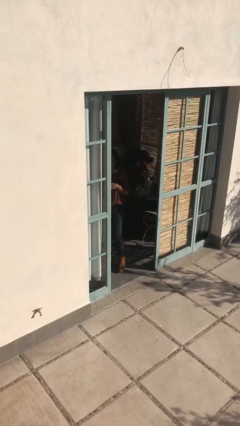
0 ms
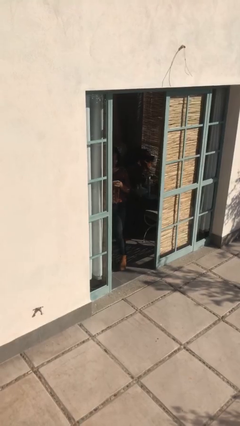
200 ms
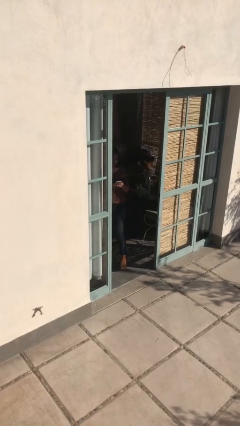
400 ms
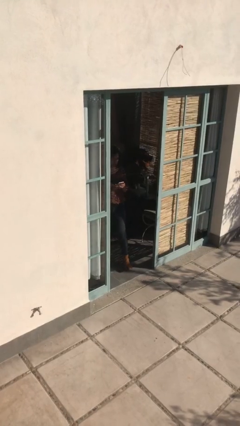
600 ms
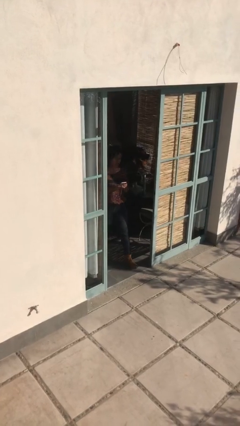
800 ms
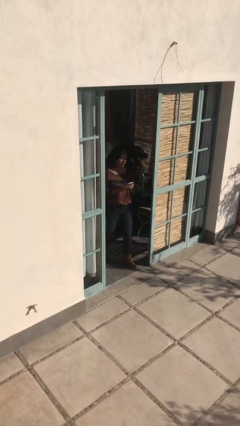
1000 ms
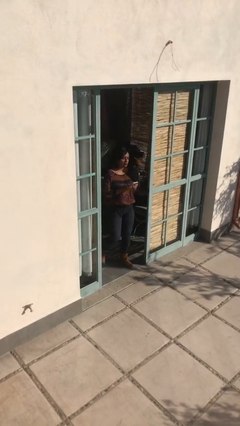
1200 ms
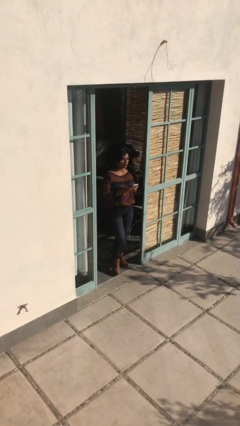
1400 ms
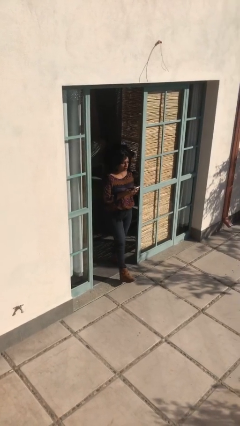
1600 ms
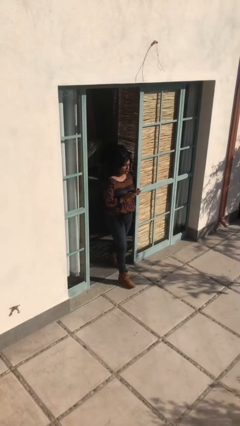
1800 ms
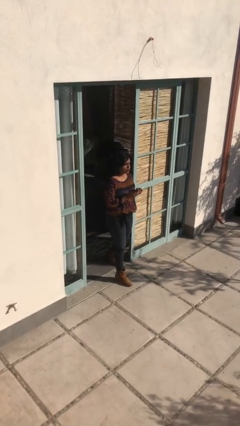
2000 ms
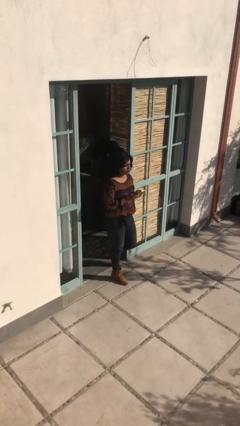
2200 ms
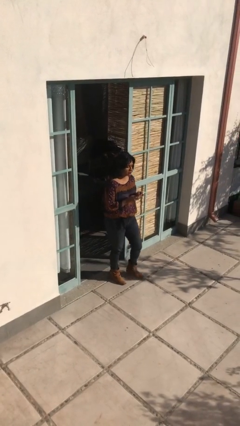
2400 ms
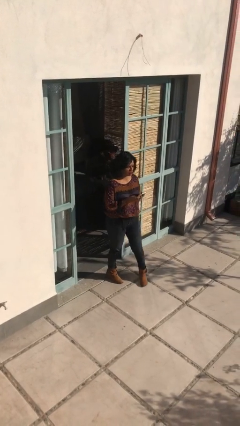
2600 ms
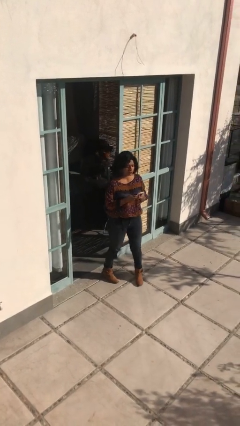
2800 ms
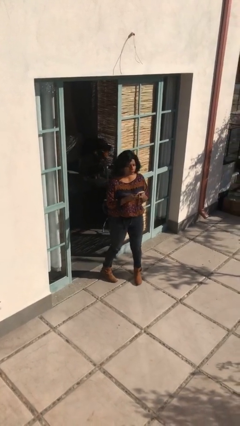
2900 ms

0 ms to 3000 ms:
person enters scene through structure

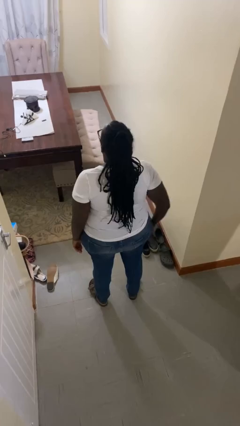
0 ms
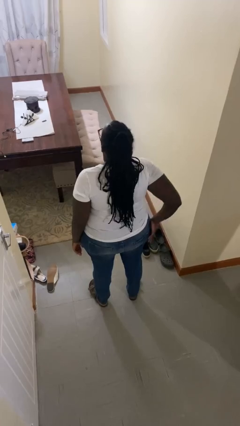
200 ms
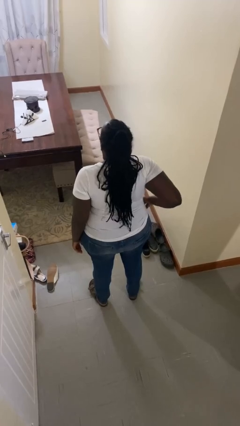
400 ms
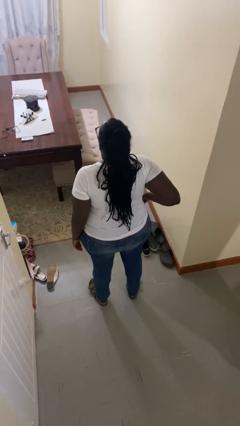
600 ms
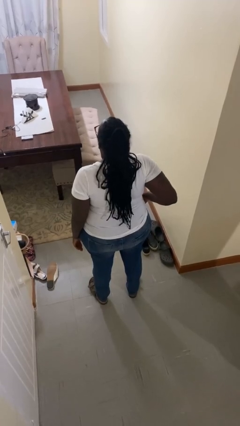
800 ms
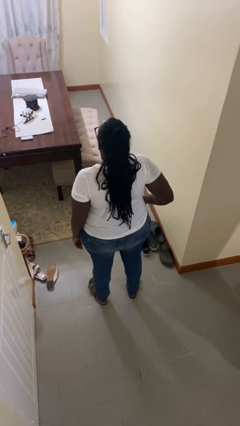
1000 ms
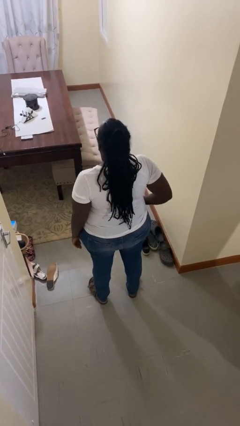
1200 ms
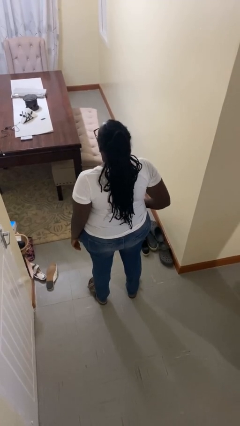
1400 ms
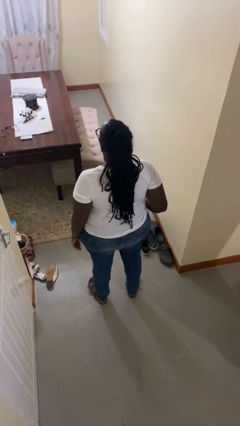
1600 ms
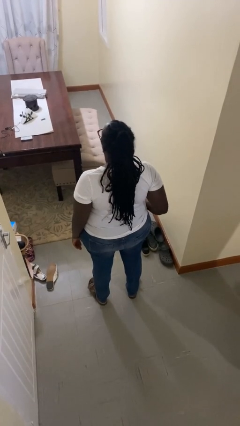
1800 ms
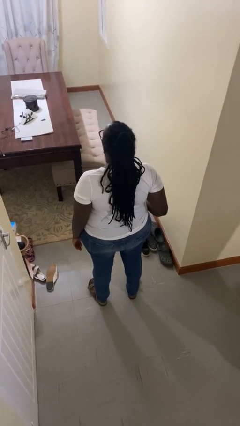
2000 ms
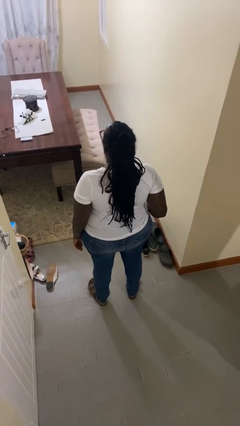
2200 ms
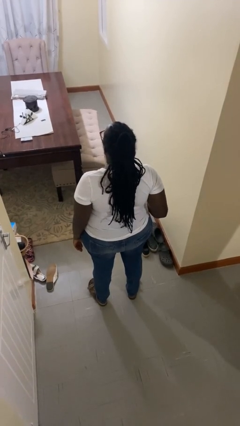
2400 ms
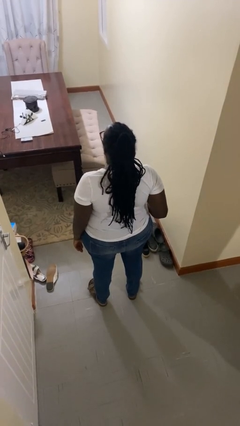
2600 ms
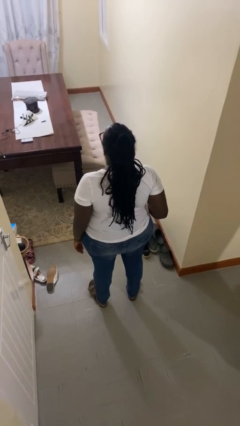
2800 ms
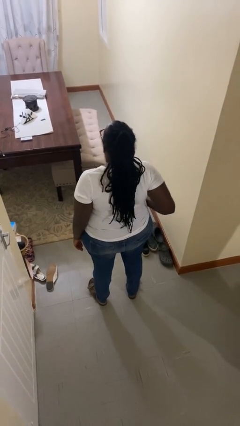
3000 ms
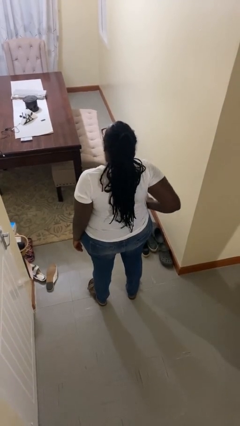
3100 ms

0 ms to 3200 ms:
person puts hands in back pockets

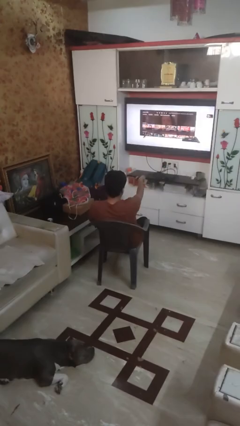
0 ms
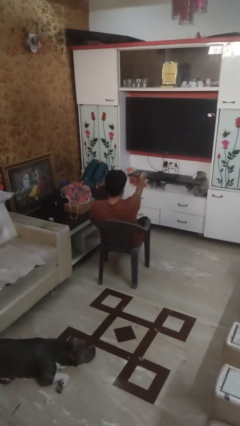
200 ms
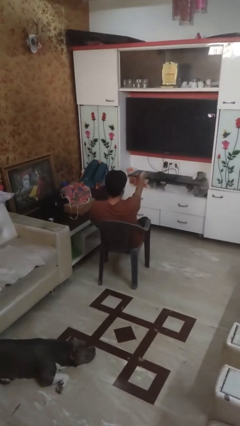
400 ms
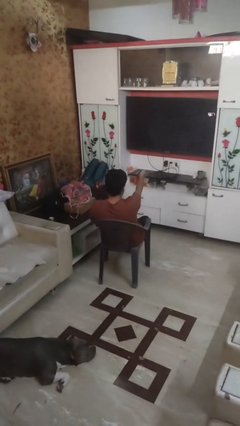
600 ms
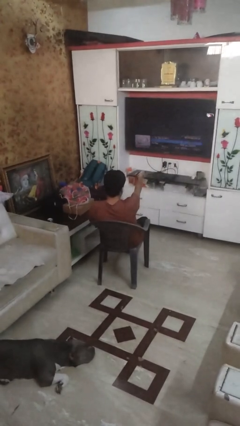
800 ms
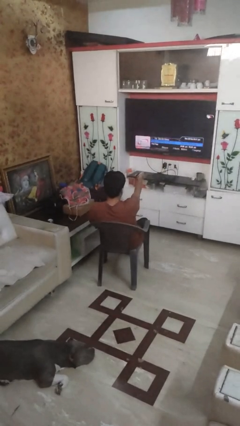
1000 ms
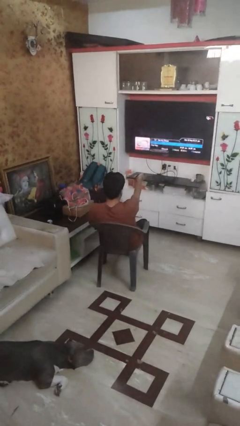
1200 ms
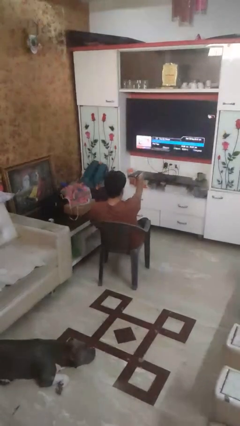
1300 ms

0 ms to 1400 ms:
person uses television remote

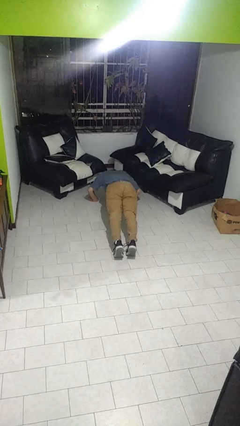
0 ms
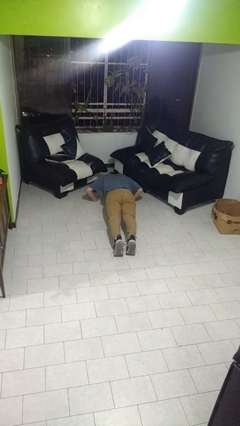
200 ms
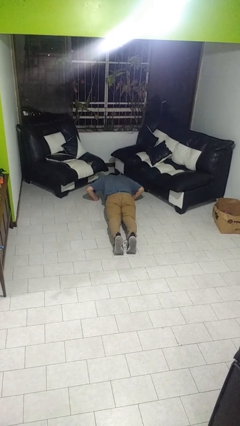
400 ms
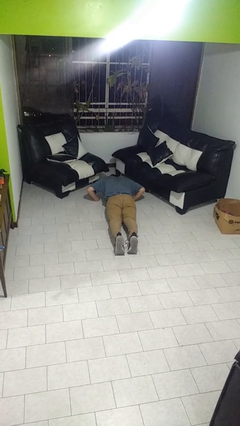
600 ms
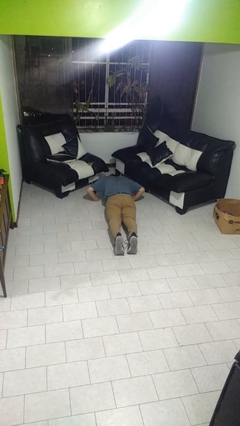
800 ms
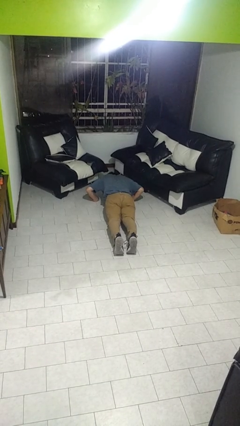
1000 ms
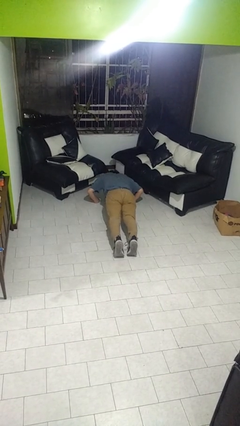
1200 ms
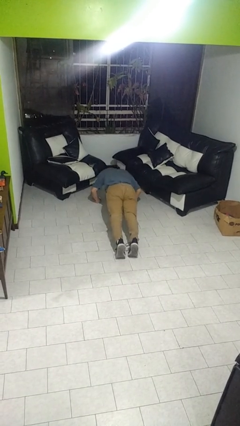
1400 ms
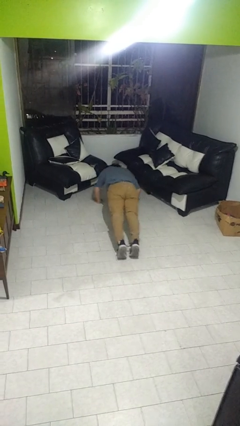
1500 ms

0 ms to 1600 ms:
person exercises with pushup

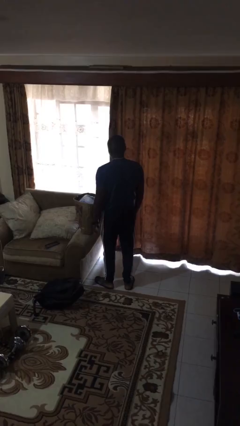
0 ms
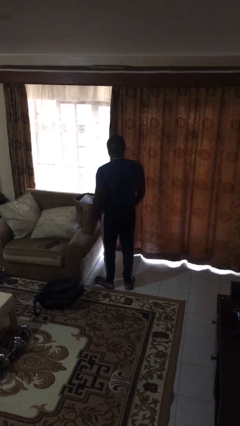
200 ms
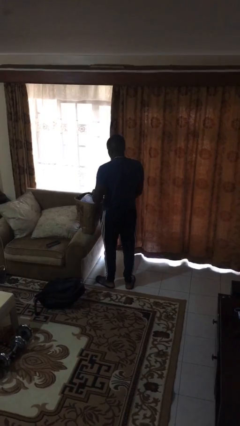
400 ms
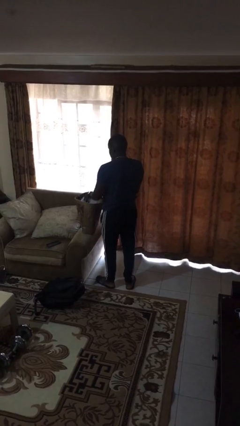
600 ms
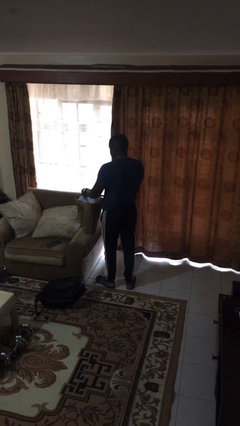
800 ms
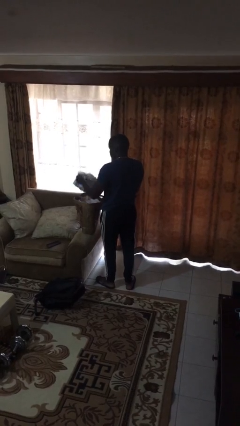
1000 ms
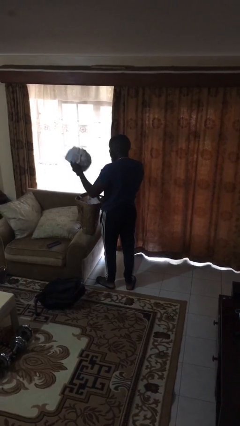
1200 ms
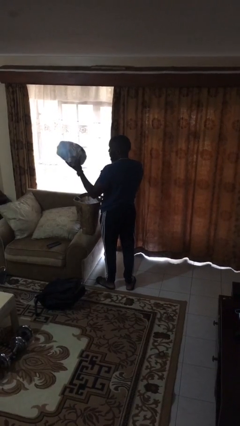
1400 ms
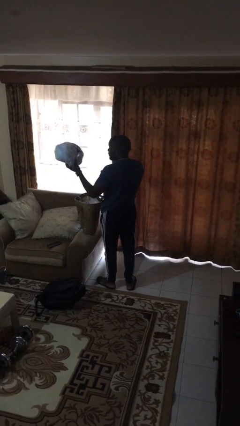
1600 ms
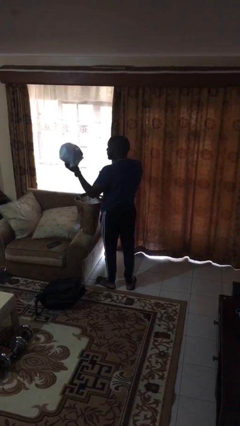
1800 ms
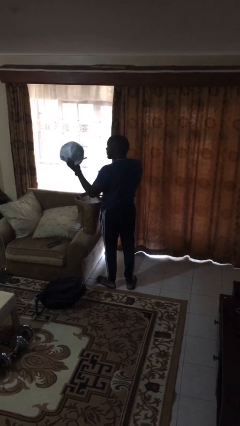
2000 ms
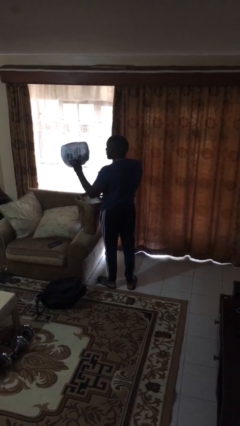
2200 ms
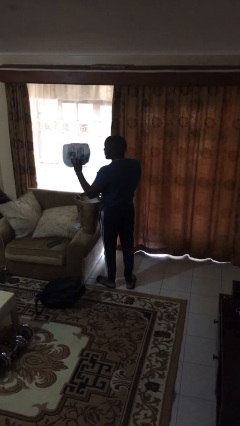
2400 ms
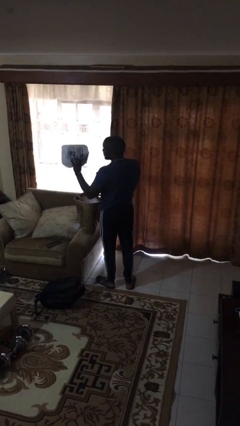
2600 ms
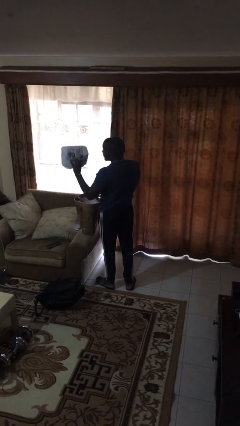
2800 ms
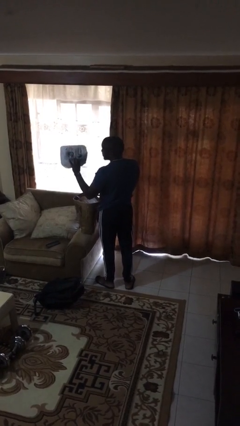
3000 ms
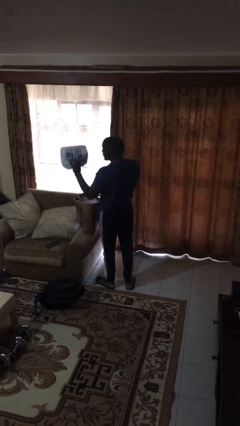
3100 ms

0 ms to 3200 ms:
person takes object from bag

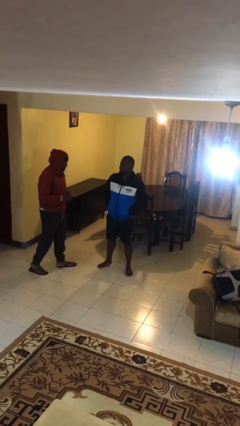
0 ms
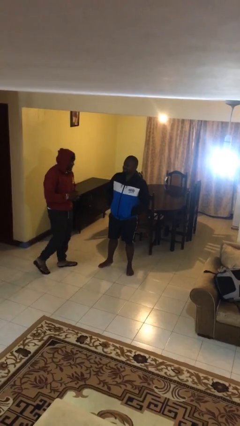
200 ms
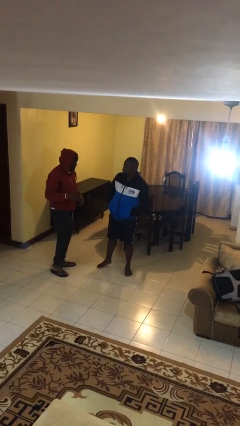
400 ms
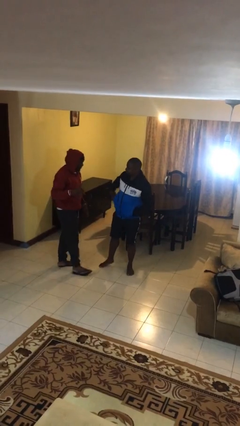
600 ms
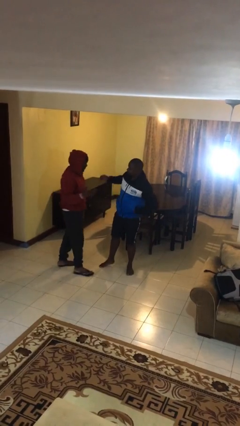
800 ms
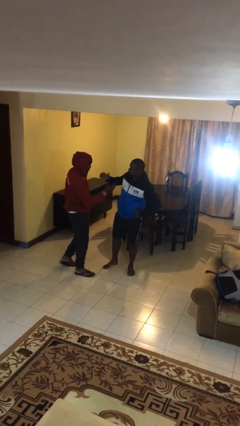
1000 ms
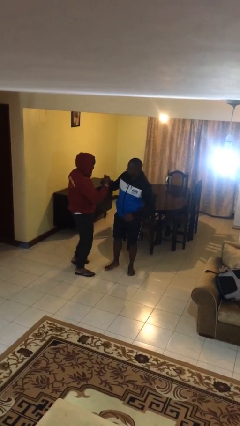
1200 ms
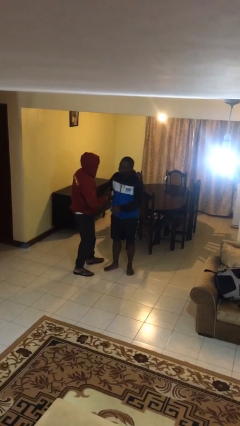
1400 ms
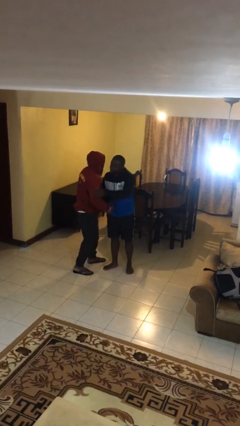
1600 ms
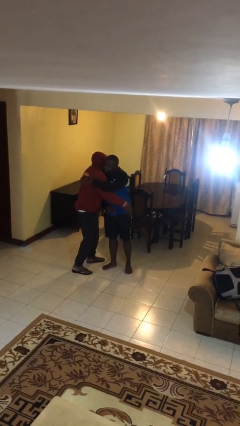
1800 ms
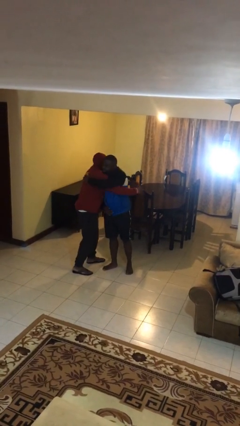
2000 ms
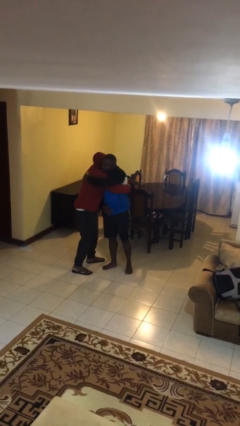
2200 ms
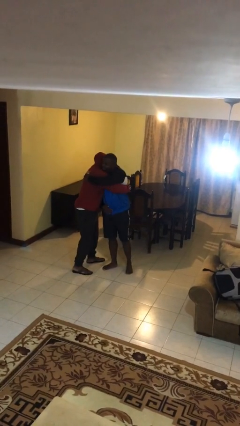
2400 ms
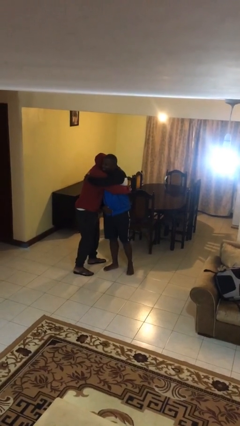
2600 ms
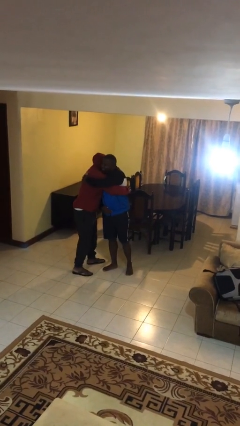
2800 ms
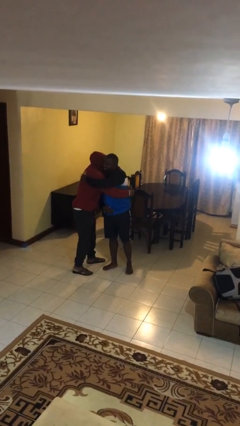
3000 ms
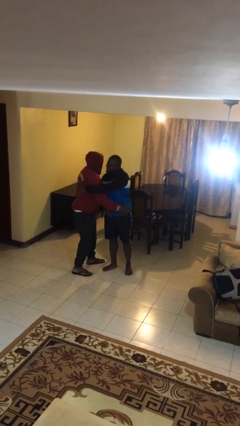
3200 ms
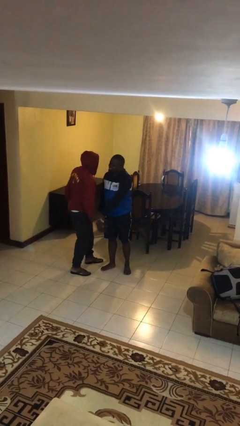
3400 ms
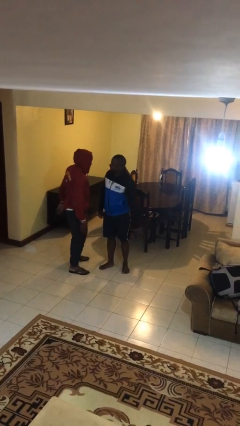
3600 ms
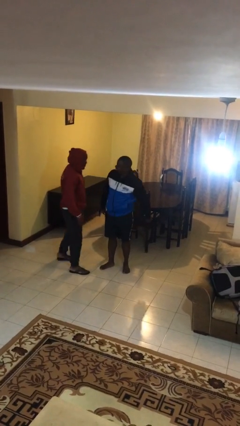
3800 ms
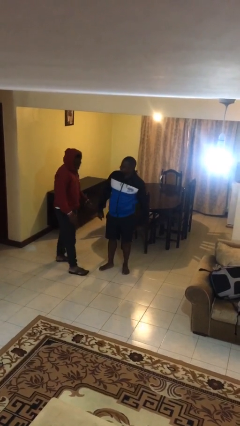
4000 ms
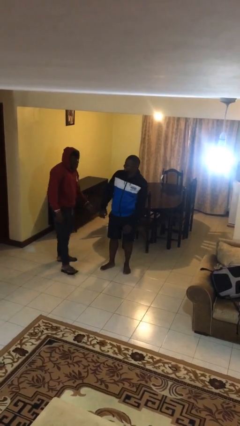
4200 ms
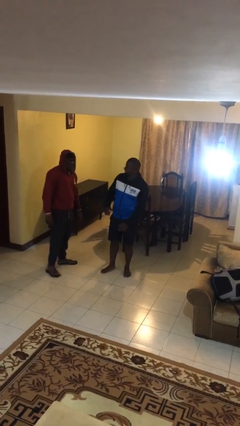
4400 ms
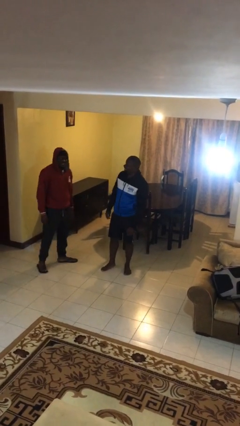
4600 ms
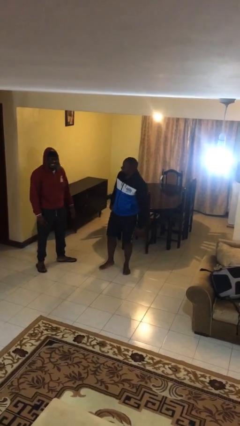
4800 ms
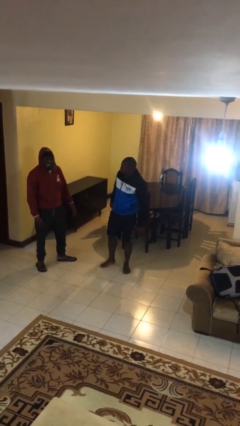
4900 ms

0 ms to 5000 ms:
person embraces person

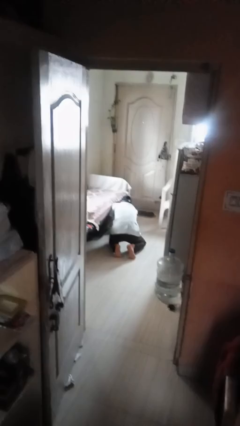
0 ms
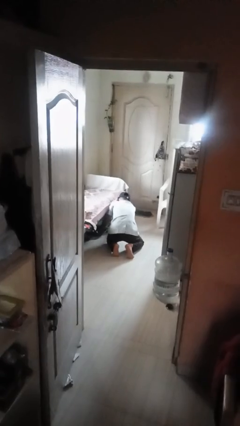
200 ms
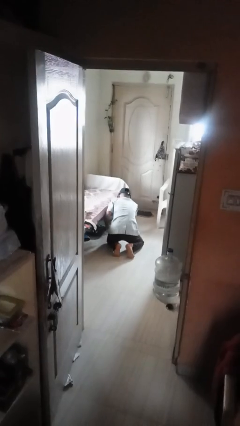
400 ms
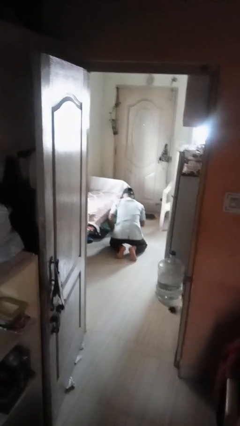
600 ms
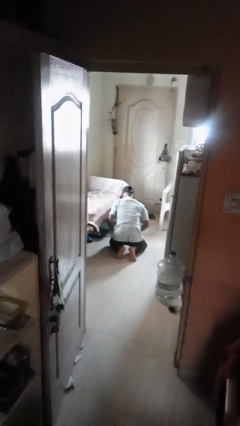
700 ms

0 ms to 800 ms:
person searches under bed
